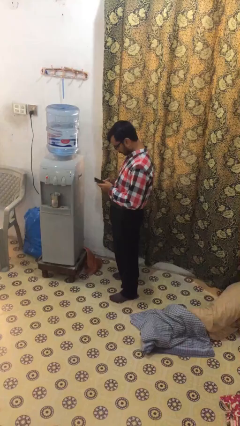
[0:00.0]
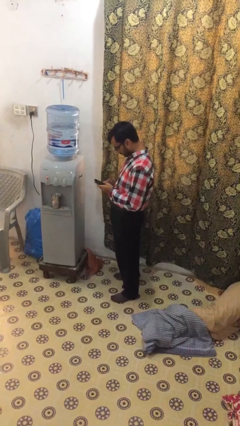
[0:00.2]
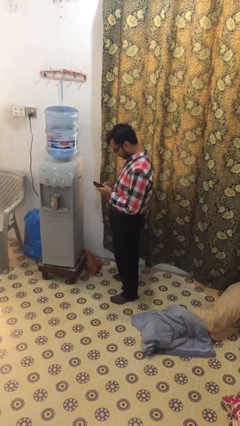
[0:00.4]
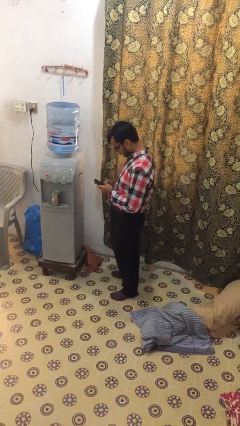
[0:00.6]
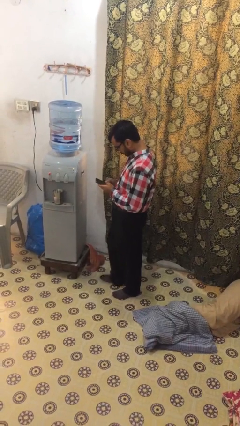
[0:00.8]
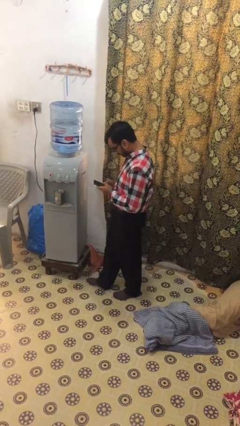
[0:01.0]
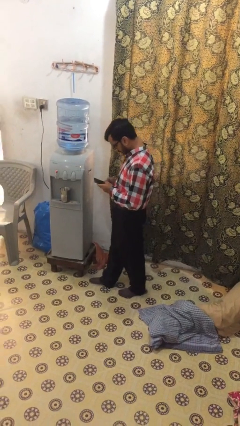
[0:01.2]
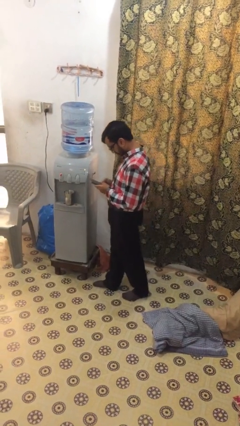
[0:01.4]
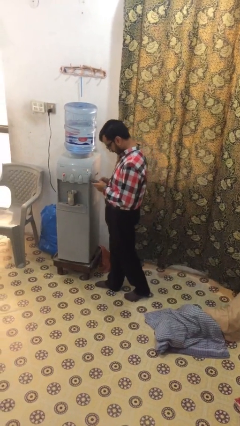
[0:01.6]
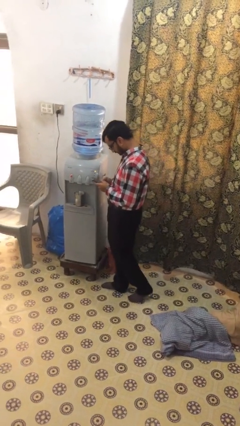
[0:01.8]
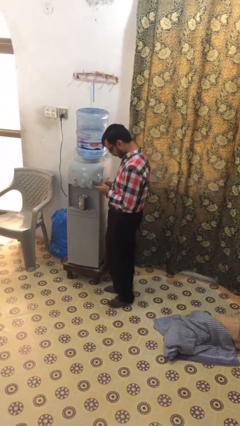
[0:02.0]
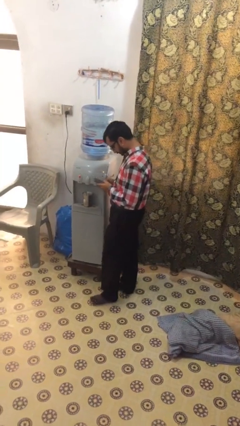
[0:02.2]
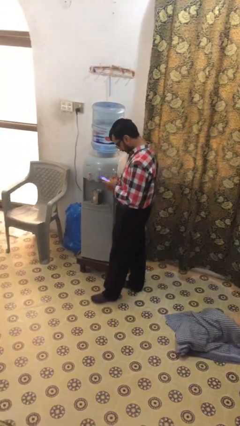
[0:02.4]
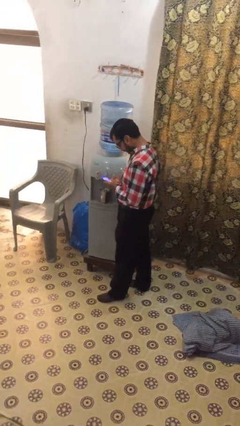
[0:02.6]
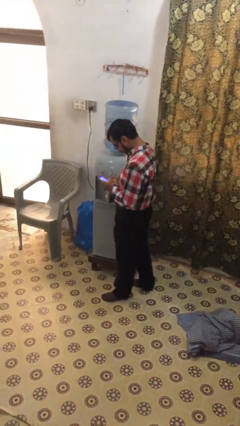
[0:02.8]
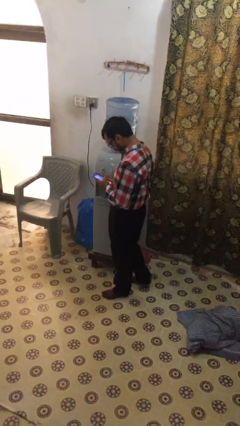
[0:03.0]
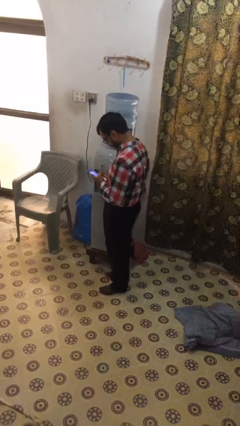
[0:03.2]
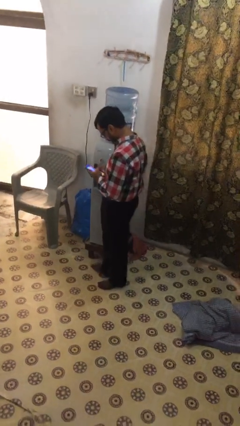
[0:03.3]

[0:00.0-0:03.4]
person texts on phone

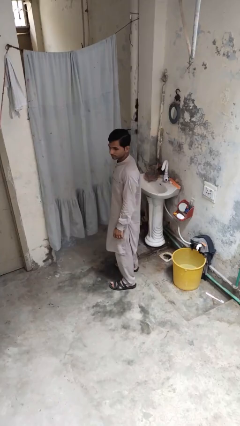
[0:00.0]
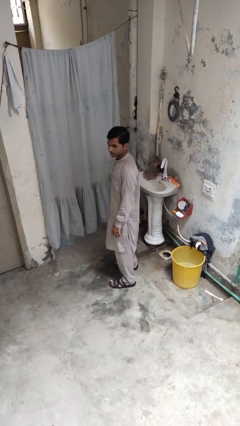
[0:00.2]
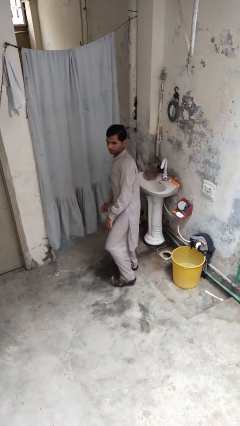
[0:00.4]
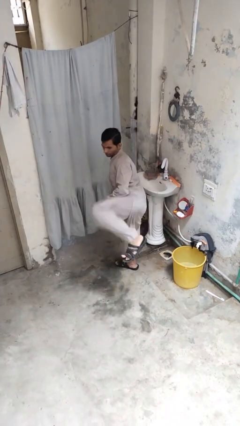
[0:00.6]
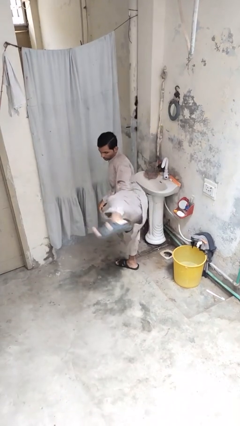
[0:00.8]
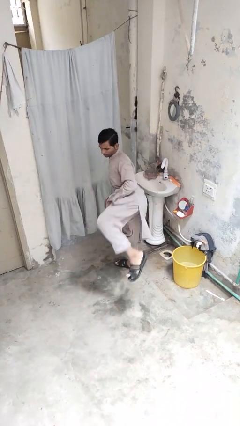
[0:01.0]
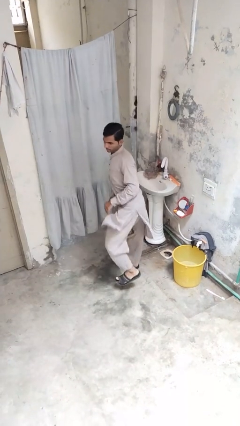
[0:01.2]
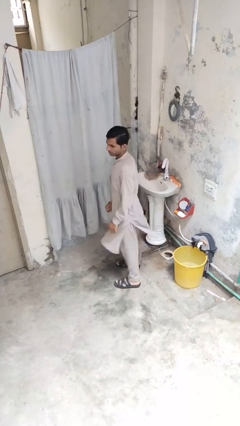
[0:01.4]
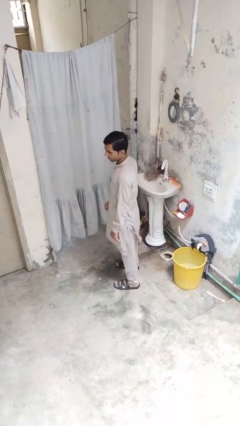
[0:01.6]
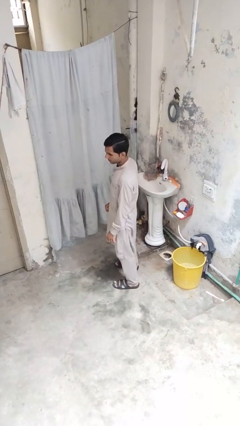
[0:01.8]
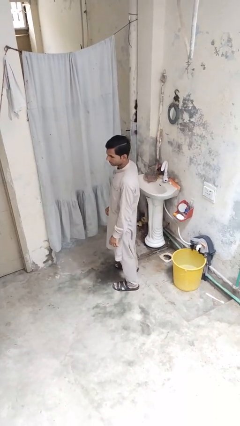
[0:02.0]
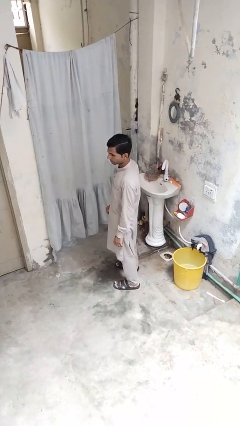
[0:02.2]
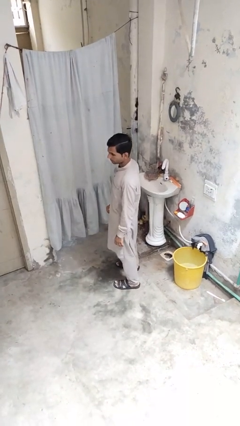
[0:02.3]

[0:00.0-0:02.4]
person karate kicks

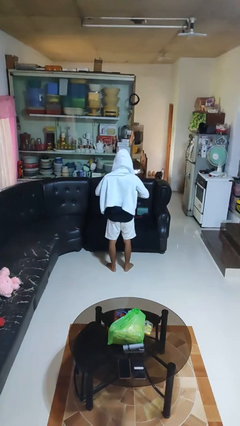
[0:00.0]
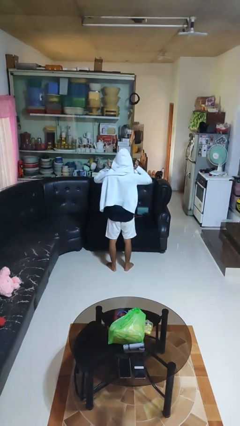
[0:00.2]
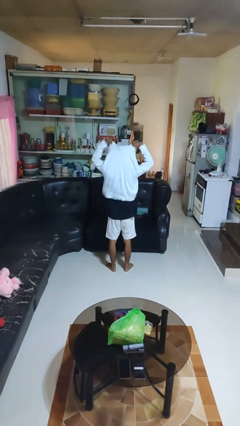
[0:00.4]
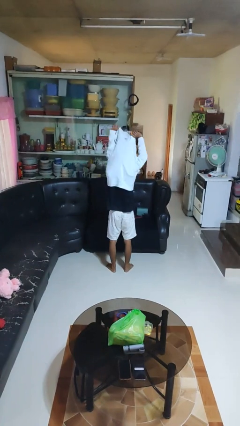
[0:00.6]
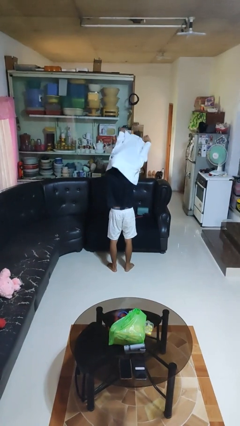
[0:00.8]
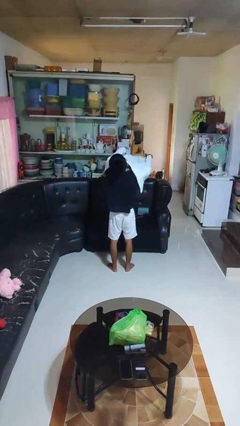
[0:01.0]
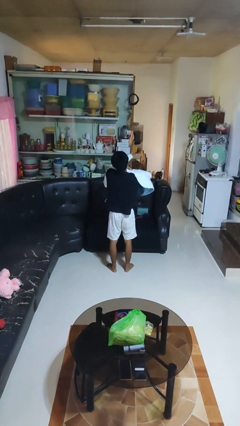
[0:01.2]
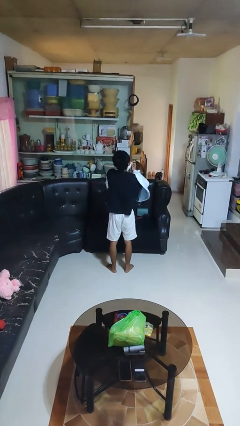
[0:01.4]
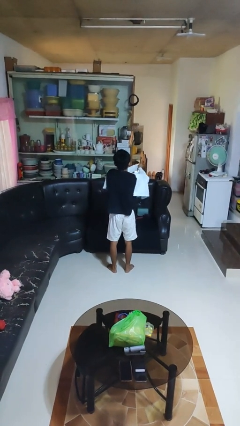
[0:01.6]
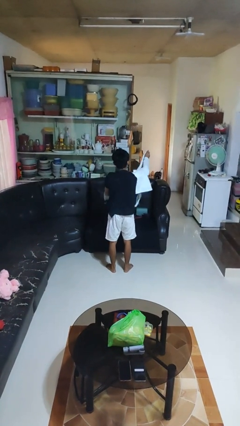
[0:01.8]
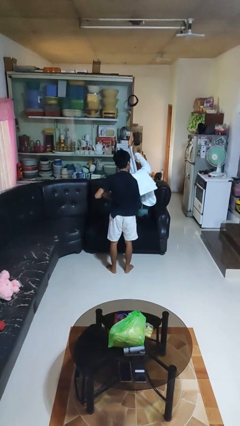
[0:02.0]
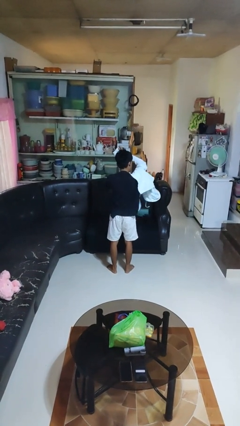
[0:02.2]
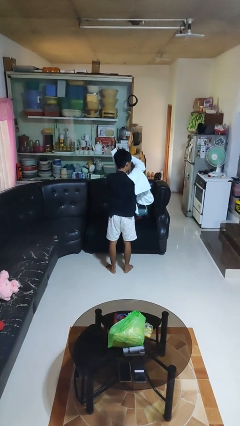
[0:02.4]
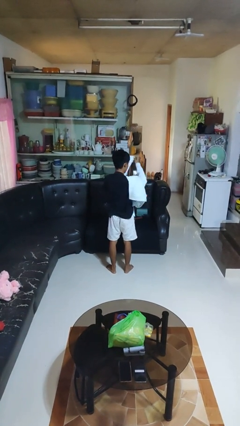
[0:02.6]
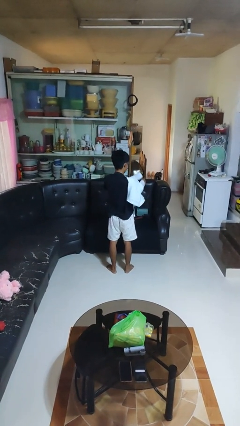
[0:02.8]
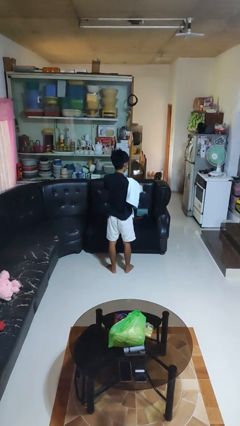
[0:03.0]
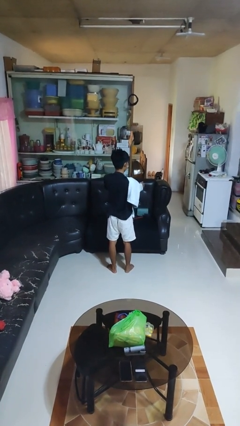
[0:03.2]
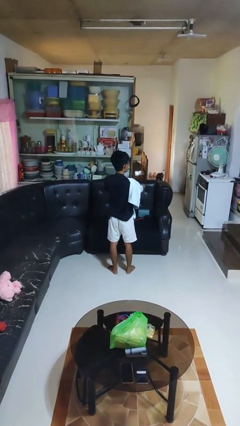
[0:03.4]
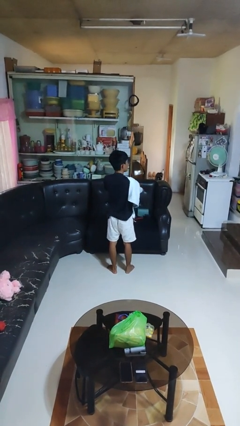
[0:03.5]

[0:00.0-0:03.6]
person takes off hoodie

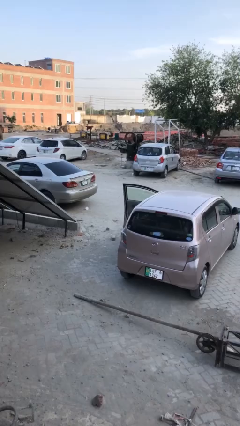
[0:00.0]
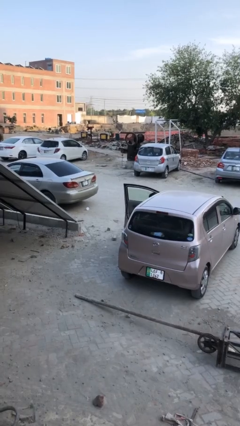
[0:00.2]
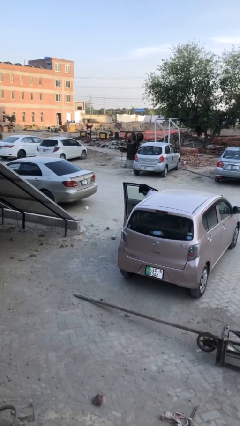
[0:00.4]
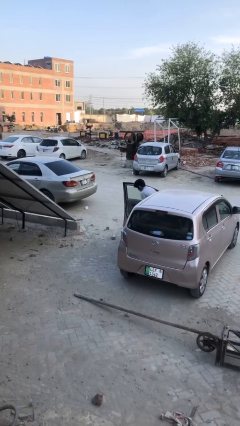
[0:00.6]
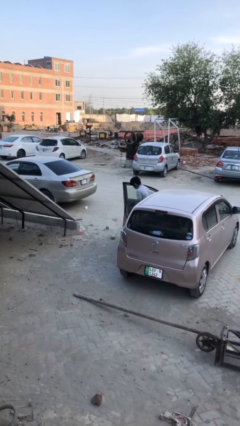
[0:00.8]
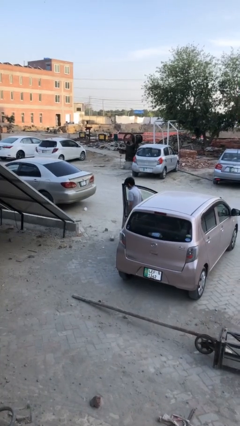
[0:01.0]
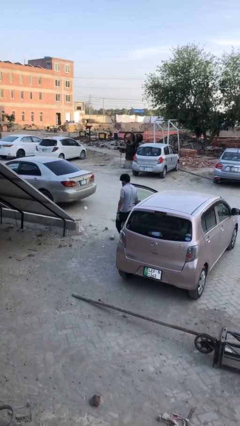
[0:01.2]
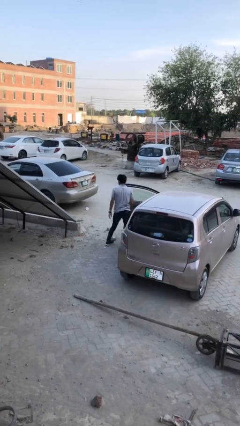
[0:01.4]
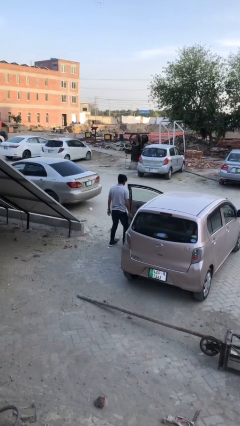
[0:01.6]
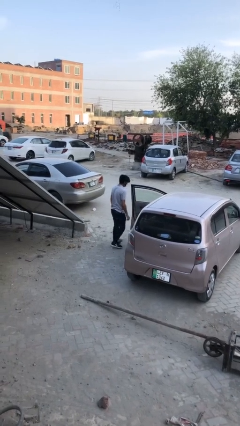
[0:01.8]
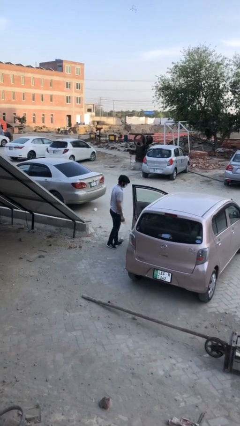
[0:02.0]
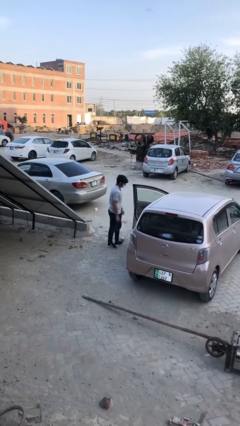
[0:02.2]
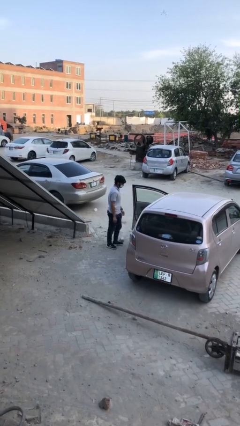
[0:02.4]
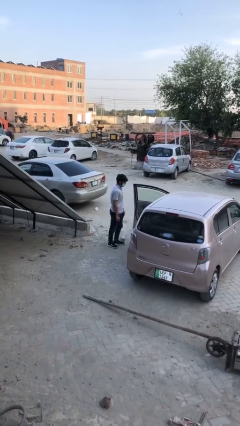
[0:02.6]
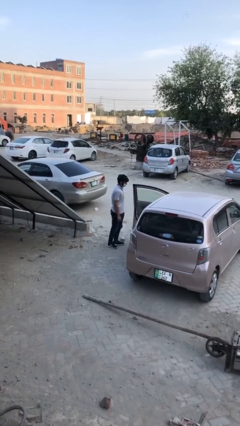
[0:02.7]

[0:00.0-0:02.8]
person exits car

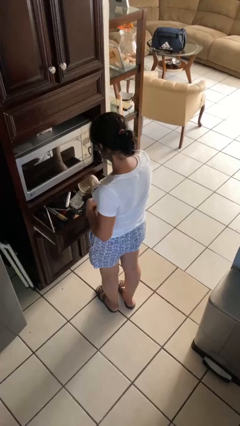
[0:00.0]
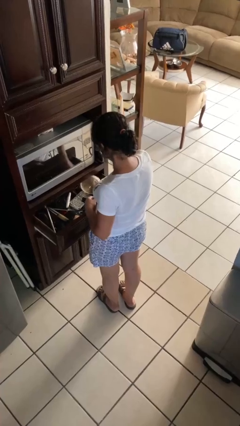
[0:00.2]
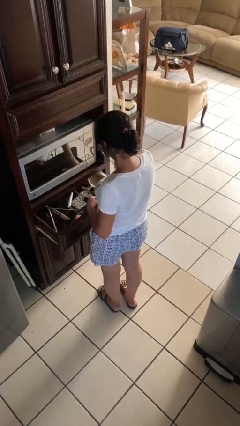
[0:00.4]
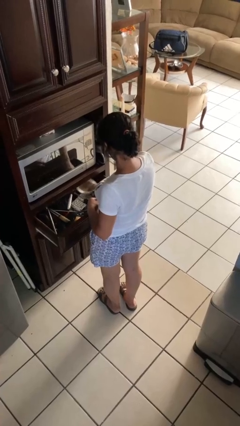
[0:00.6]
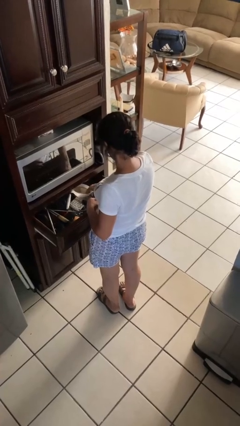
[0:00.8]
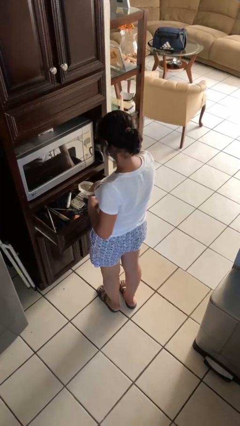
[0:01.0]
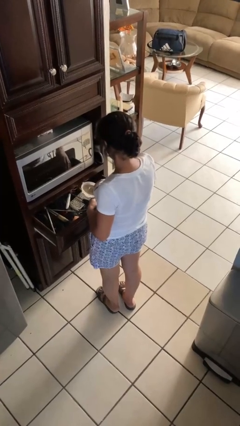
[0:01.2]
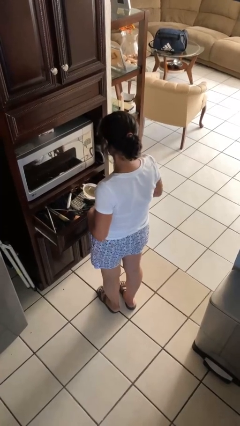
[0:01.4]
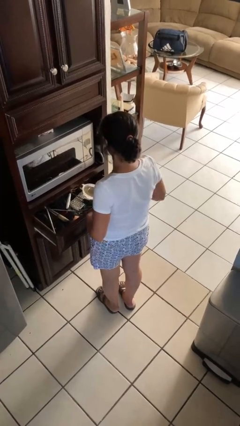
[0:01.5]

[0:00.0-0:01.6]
person searches in kitchen drawer

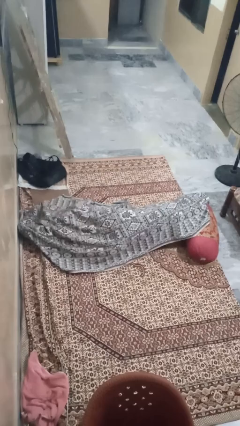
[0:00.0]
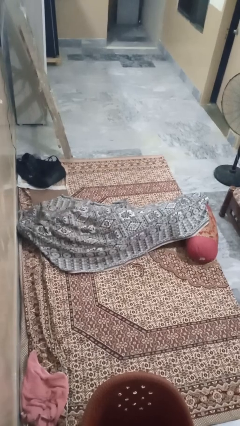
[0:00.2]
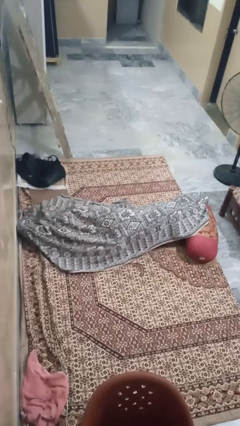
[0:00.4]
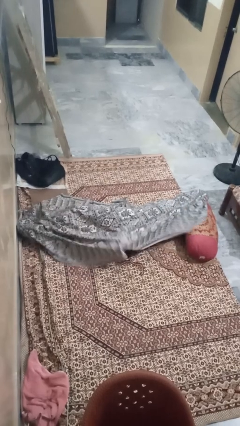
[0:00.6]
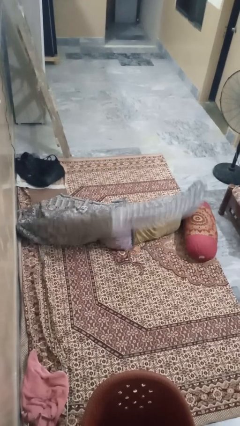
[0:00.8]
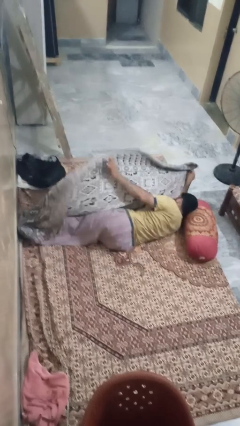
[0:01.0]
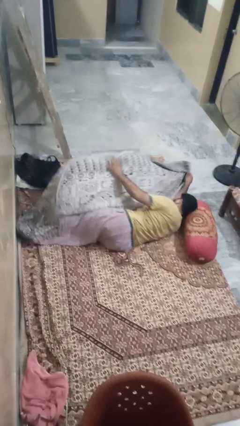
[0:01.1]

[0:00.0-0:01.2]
person uncovers with blanket

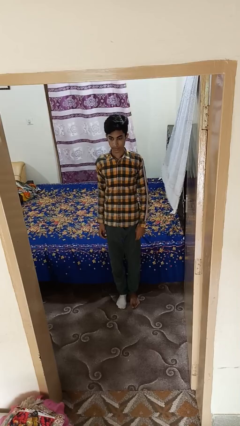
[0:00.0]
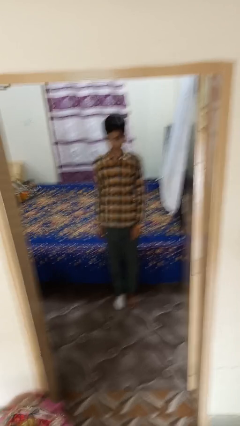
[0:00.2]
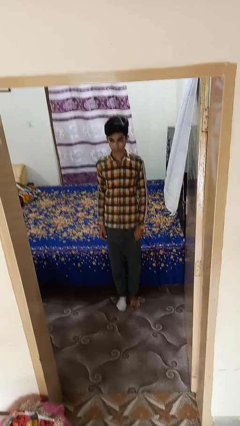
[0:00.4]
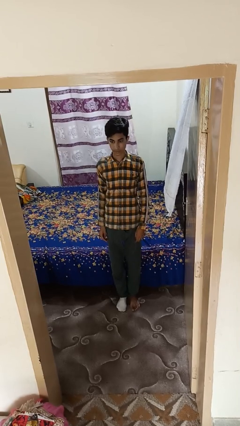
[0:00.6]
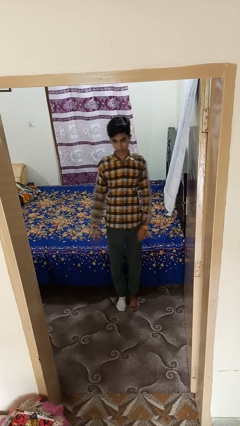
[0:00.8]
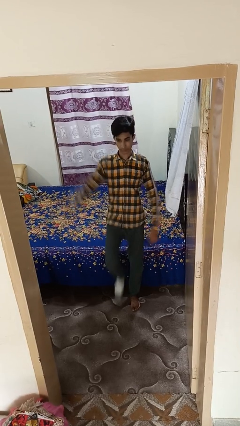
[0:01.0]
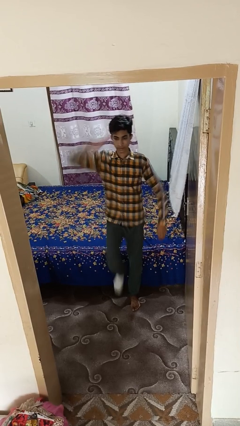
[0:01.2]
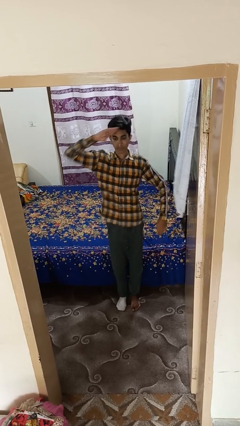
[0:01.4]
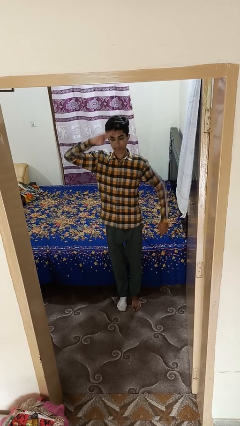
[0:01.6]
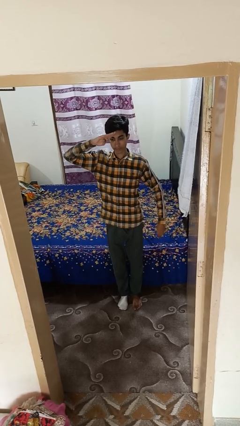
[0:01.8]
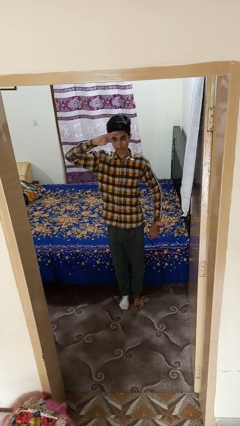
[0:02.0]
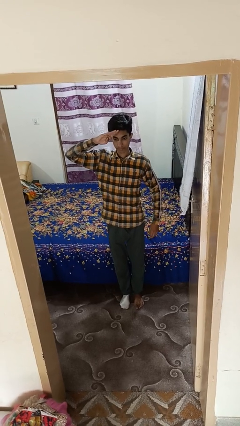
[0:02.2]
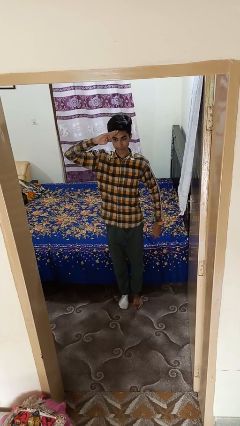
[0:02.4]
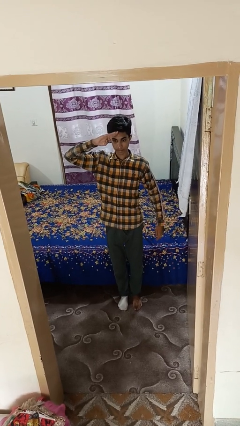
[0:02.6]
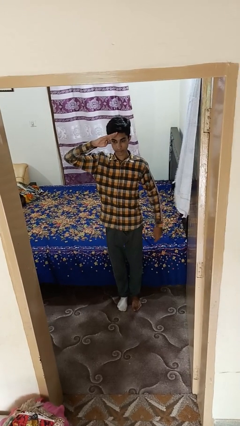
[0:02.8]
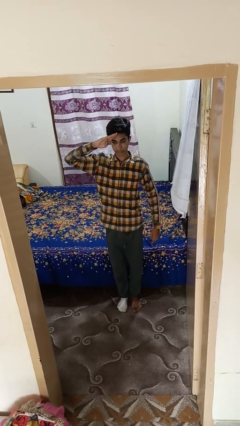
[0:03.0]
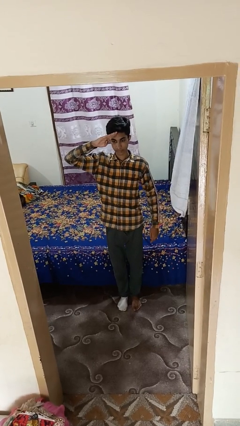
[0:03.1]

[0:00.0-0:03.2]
person salutes
